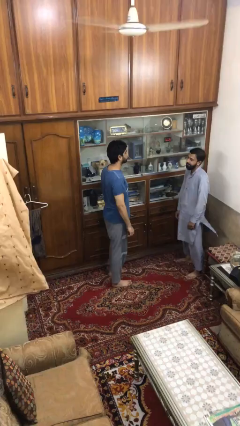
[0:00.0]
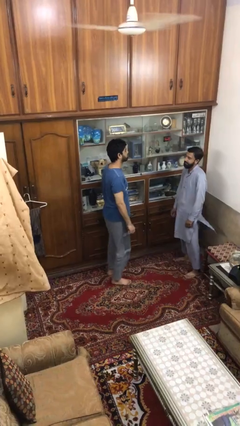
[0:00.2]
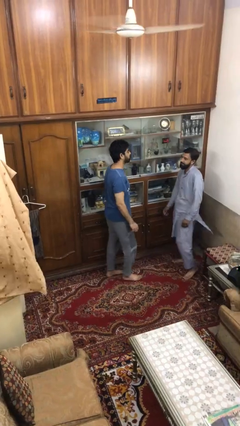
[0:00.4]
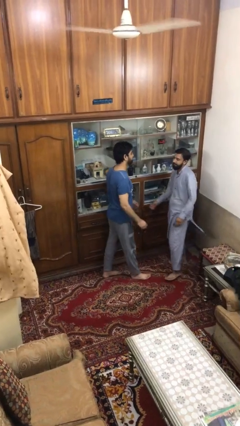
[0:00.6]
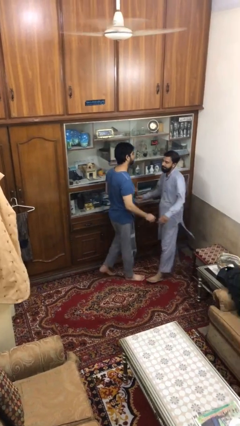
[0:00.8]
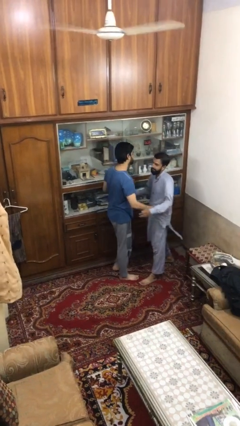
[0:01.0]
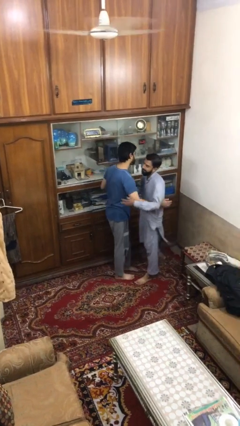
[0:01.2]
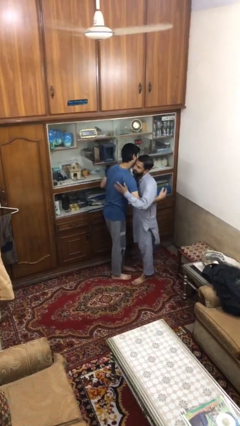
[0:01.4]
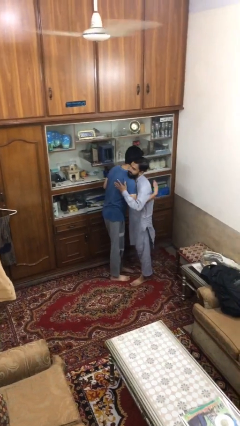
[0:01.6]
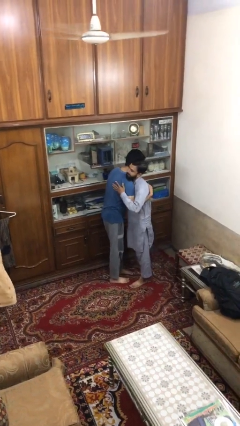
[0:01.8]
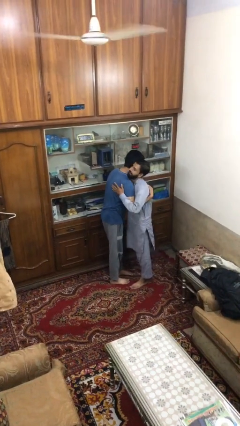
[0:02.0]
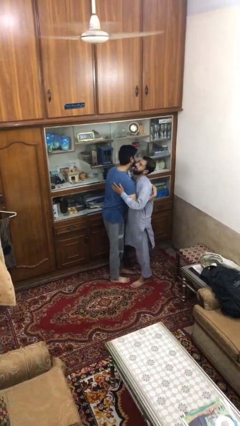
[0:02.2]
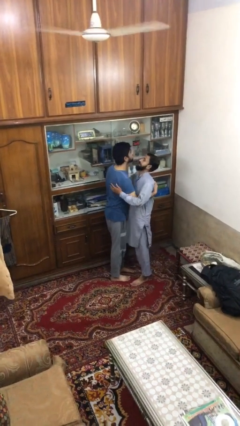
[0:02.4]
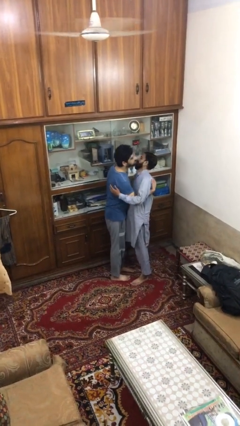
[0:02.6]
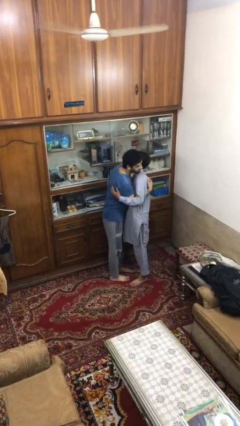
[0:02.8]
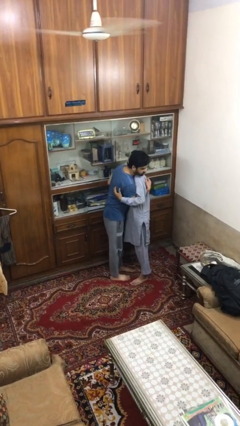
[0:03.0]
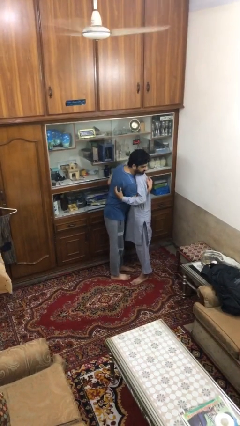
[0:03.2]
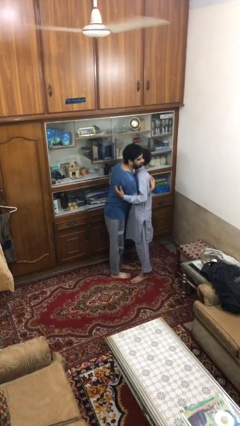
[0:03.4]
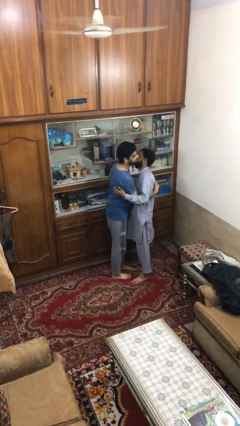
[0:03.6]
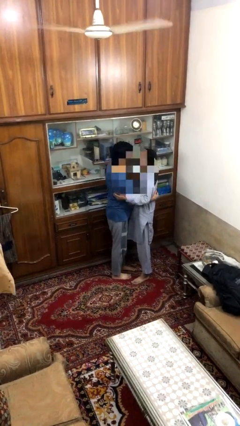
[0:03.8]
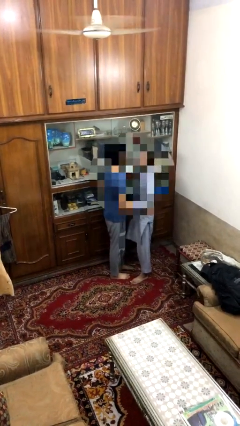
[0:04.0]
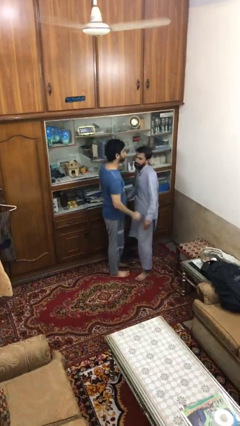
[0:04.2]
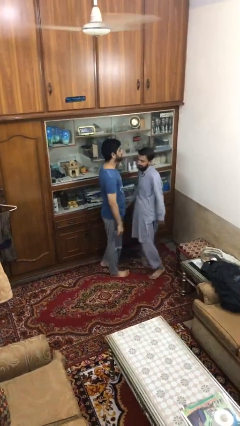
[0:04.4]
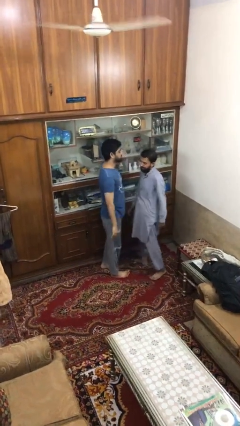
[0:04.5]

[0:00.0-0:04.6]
person embraces person

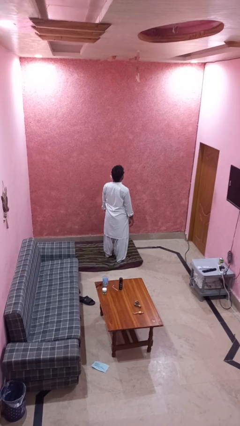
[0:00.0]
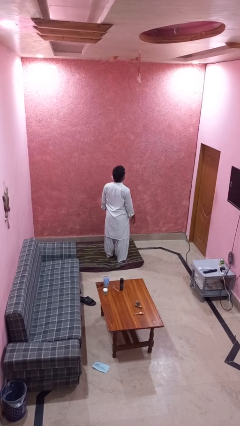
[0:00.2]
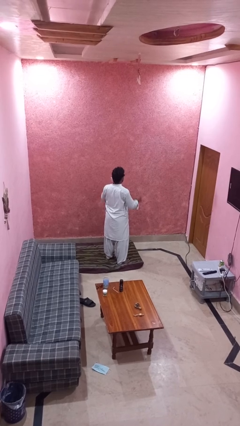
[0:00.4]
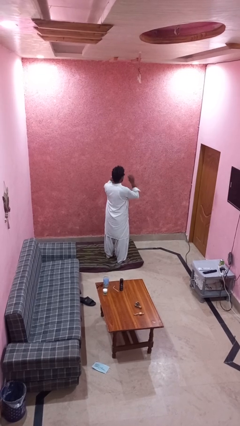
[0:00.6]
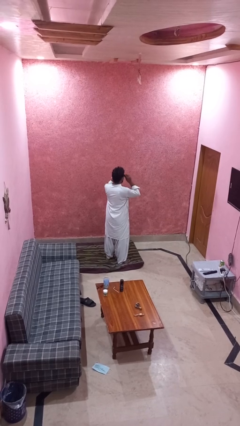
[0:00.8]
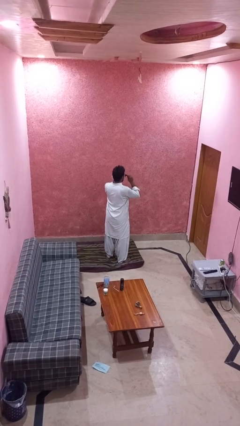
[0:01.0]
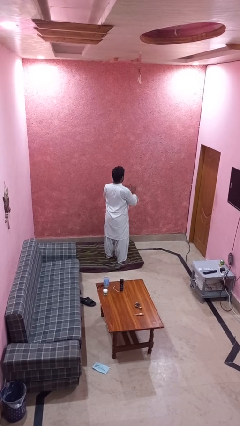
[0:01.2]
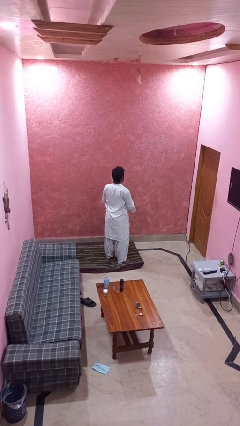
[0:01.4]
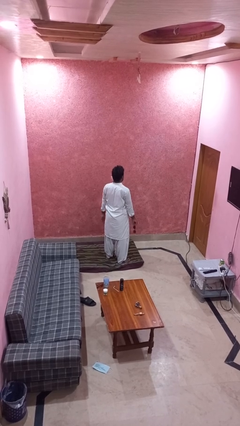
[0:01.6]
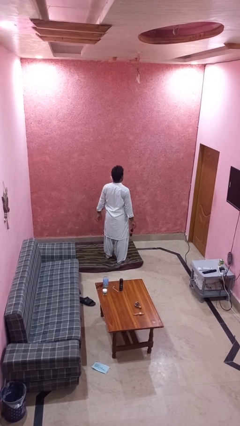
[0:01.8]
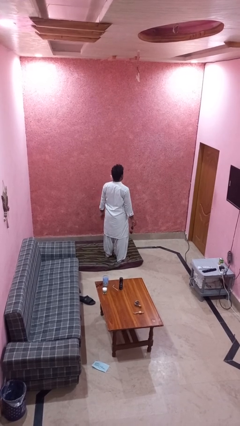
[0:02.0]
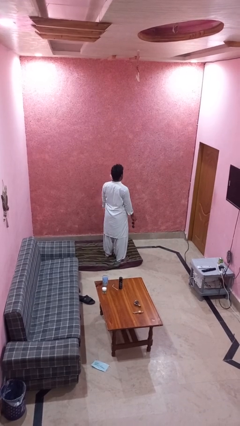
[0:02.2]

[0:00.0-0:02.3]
person takes off sunglasses

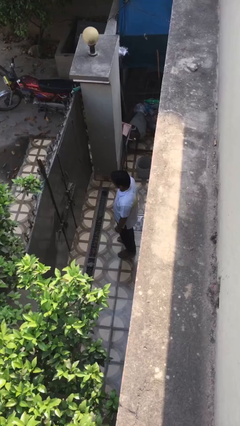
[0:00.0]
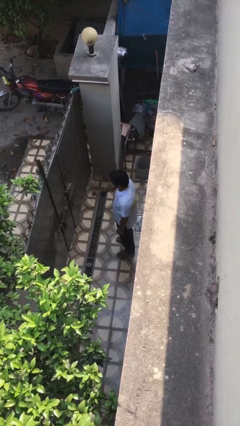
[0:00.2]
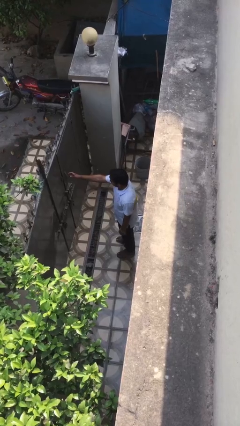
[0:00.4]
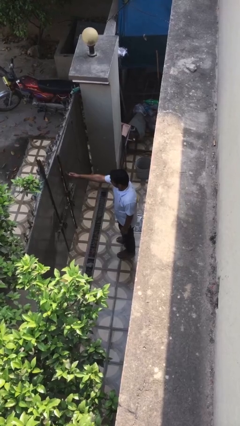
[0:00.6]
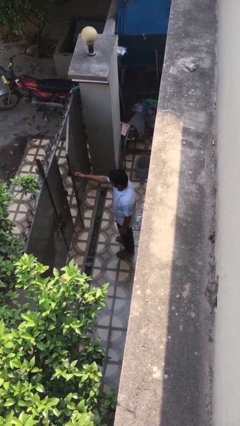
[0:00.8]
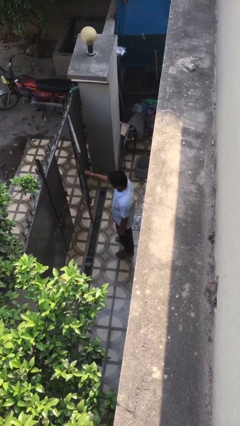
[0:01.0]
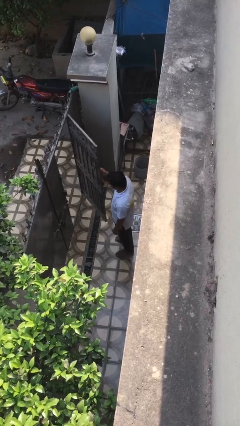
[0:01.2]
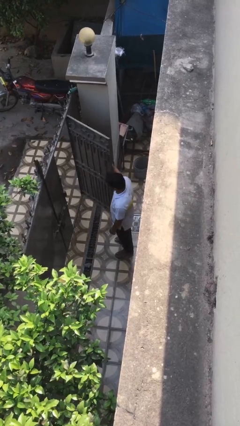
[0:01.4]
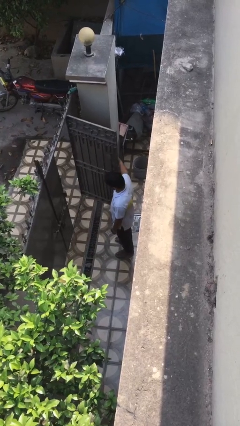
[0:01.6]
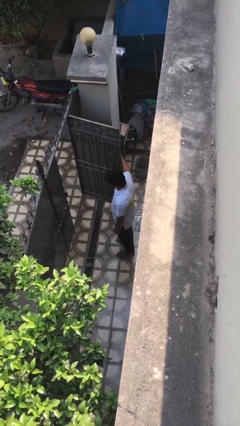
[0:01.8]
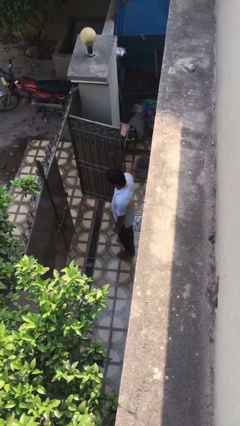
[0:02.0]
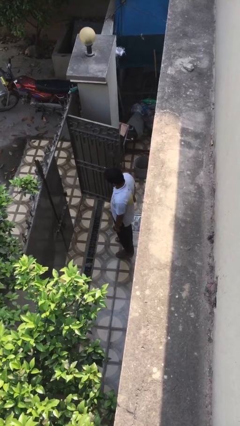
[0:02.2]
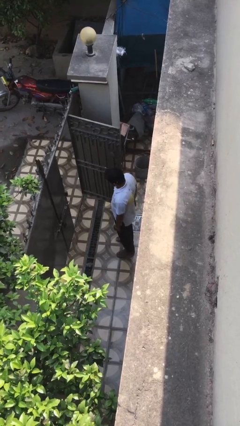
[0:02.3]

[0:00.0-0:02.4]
person opens facility door

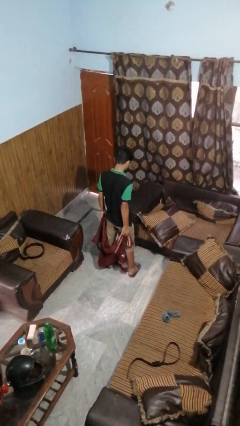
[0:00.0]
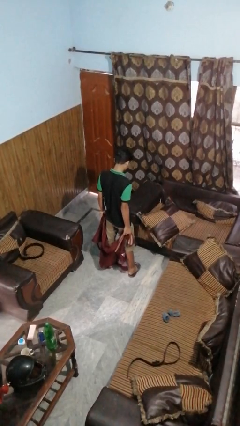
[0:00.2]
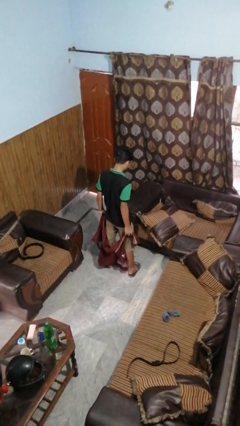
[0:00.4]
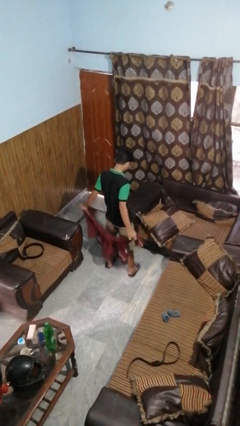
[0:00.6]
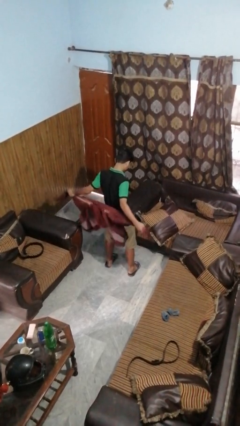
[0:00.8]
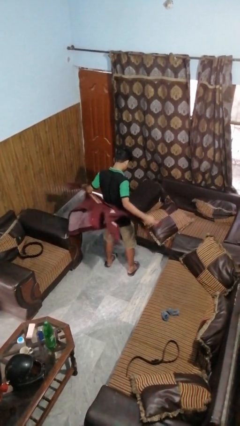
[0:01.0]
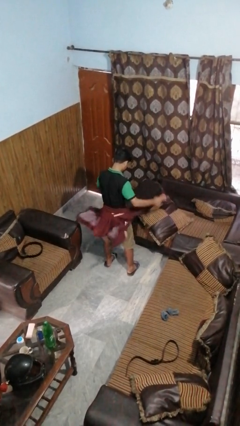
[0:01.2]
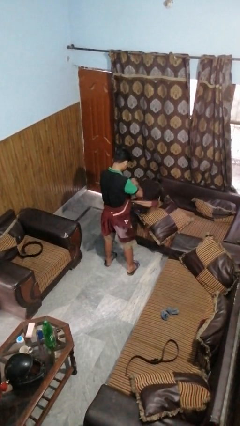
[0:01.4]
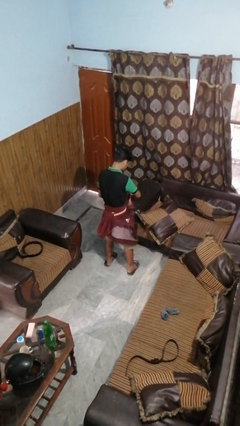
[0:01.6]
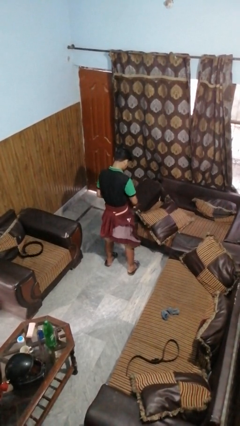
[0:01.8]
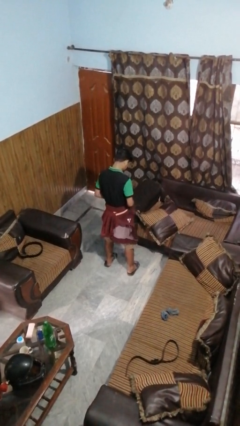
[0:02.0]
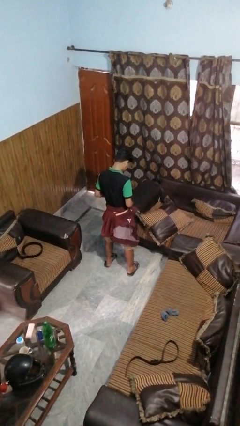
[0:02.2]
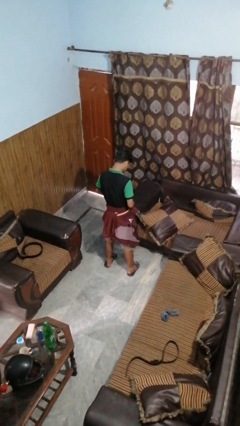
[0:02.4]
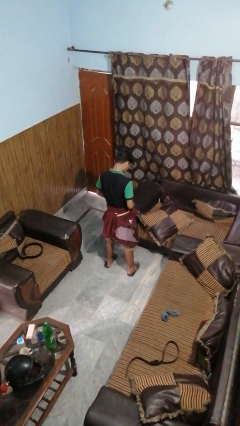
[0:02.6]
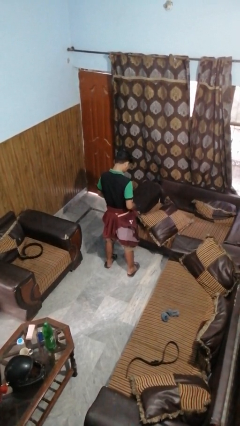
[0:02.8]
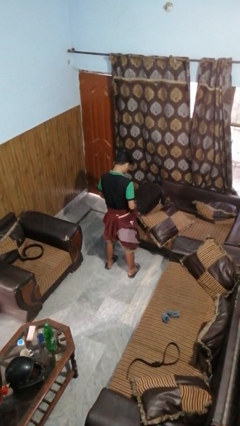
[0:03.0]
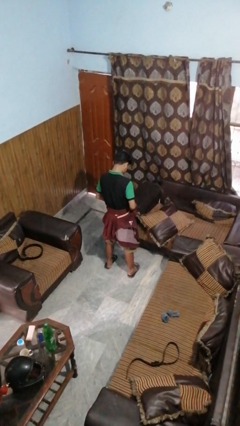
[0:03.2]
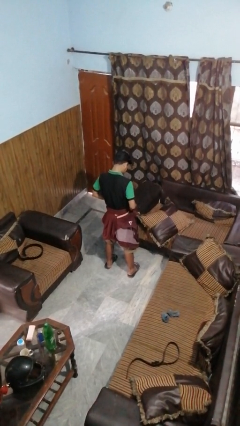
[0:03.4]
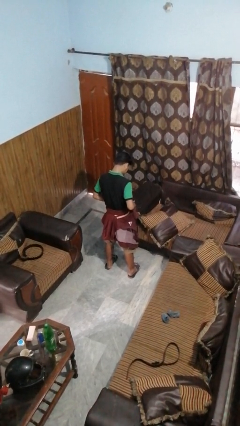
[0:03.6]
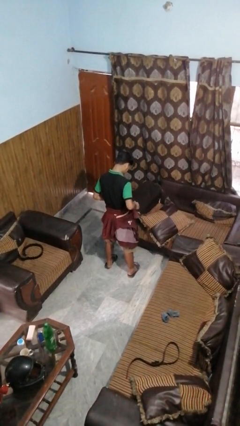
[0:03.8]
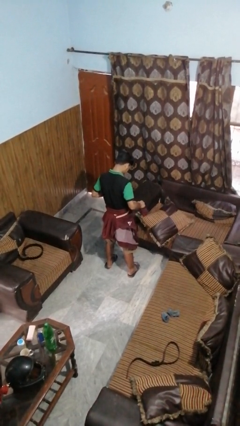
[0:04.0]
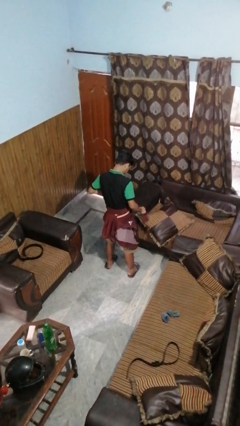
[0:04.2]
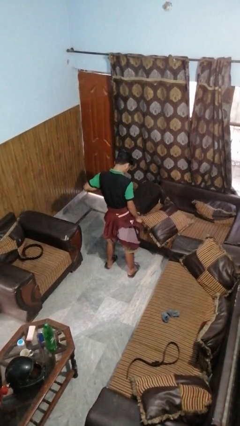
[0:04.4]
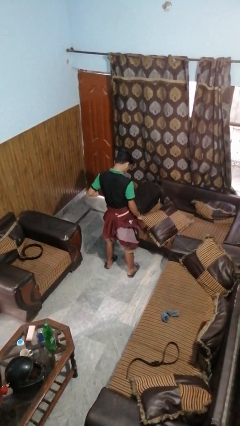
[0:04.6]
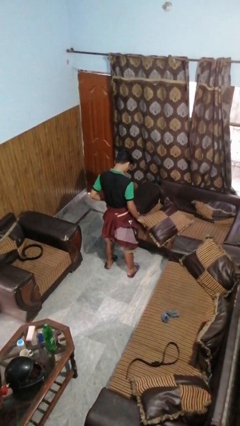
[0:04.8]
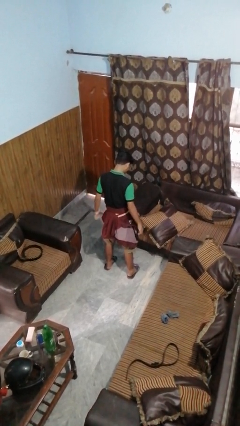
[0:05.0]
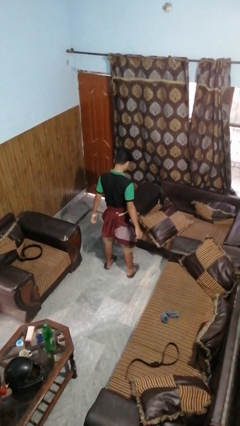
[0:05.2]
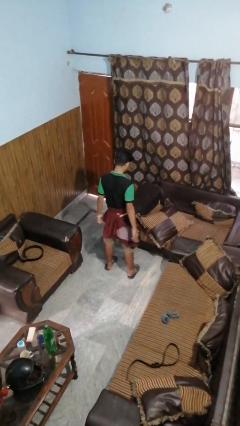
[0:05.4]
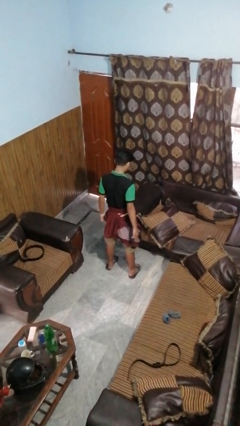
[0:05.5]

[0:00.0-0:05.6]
person ties jacket around waist

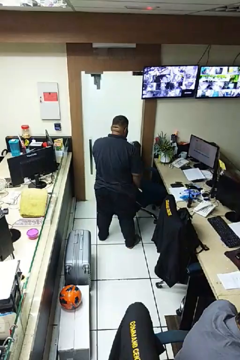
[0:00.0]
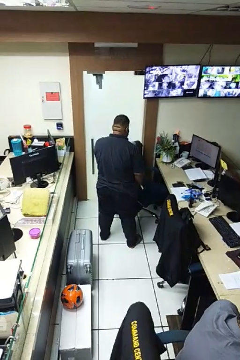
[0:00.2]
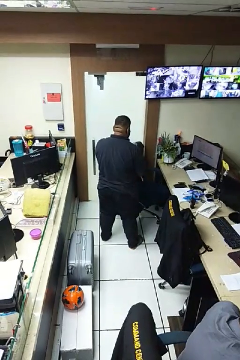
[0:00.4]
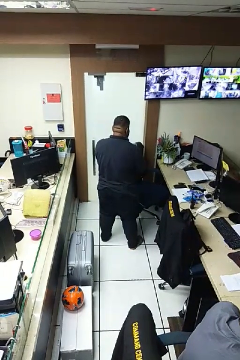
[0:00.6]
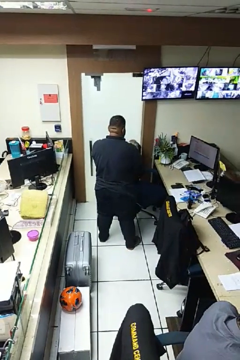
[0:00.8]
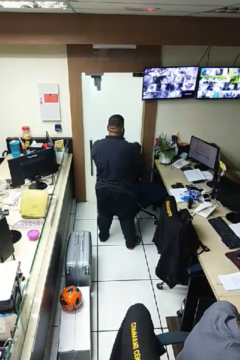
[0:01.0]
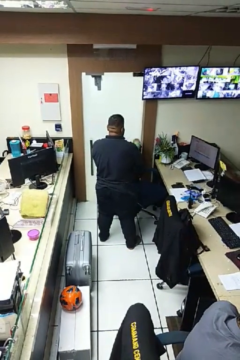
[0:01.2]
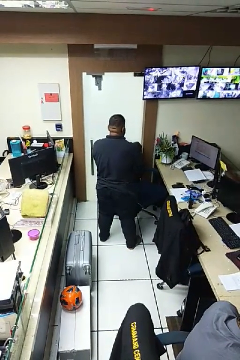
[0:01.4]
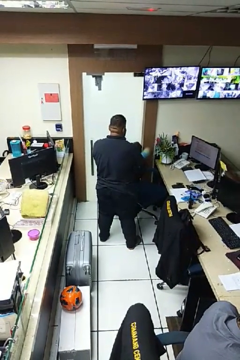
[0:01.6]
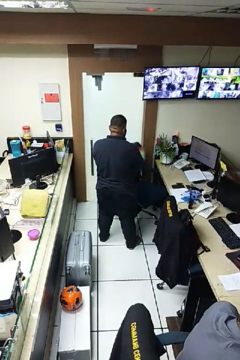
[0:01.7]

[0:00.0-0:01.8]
person dusts furniture

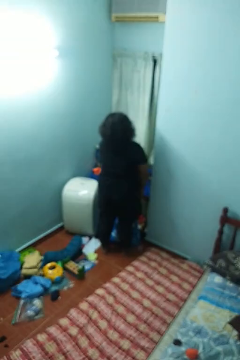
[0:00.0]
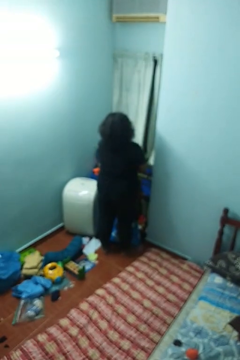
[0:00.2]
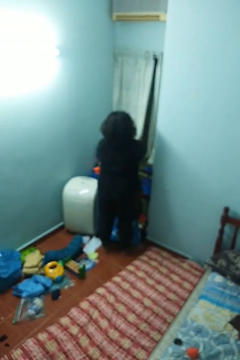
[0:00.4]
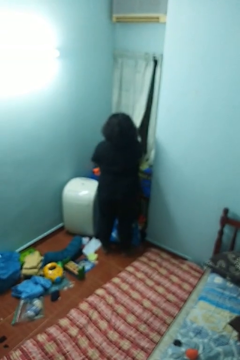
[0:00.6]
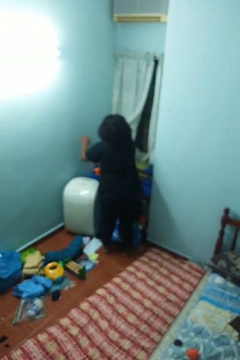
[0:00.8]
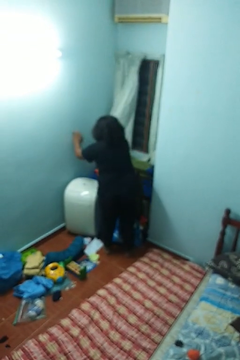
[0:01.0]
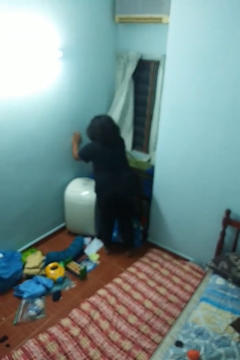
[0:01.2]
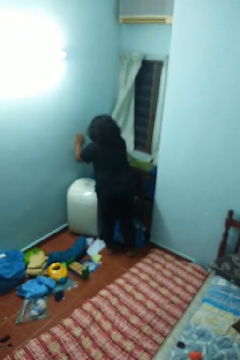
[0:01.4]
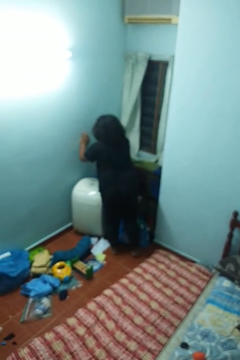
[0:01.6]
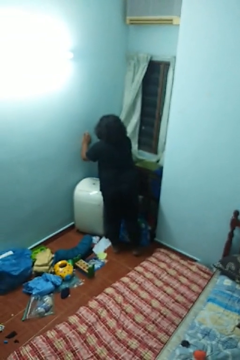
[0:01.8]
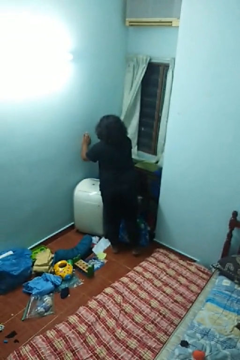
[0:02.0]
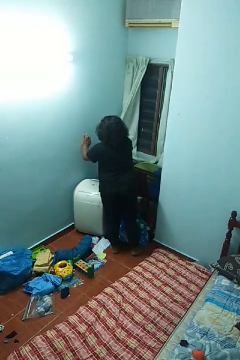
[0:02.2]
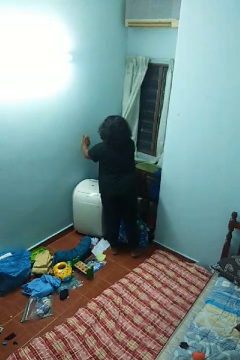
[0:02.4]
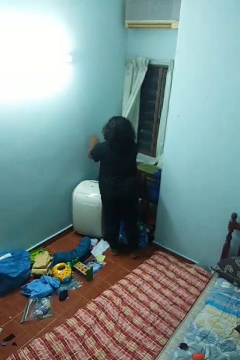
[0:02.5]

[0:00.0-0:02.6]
person opens curtains
